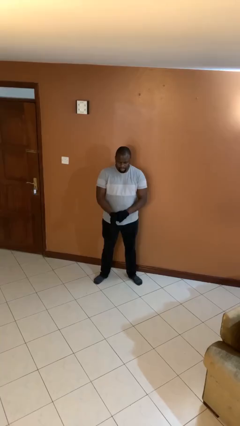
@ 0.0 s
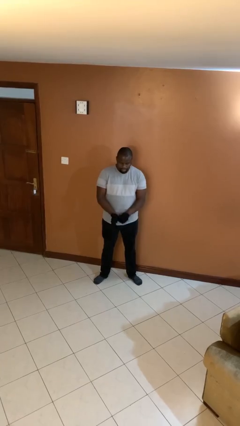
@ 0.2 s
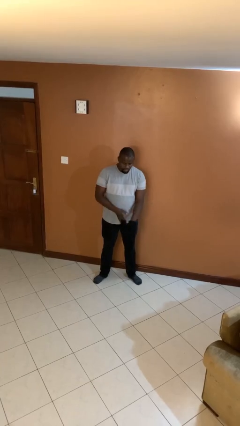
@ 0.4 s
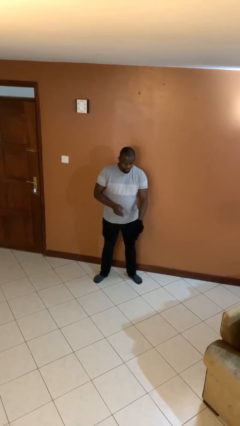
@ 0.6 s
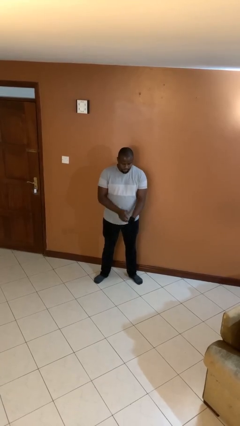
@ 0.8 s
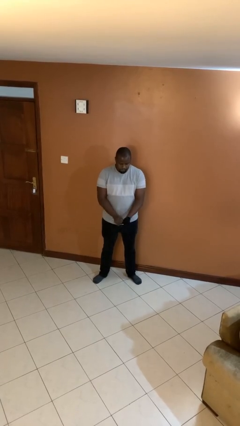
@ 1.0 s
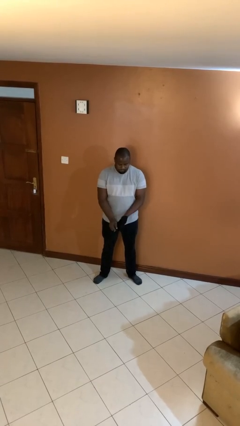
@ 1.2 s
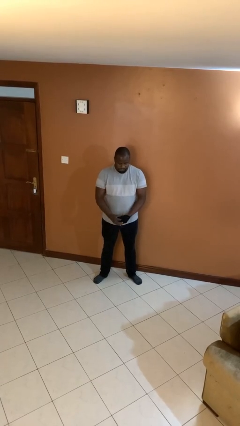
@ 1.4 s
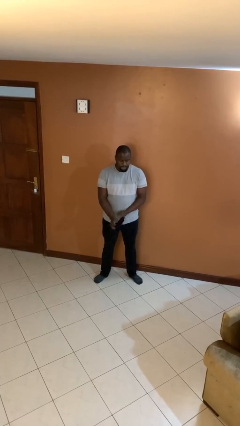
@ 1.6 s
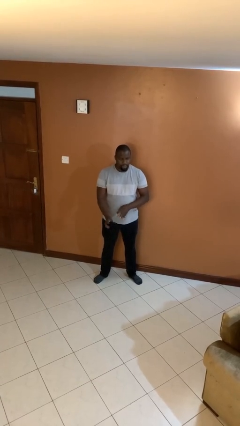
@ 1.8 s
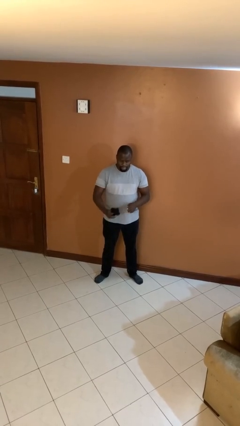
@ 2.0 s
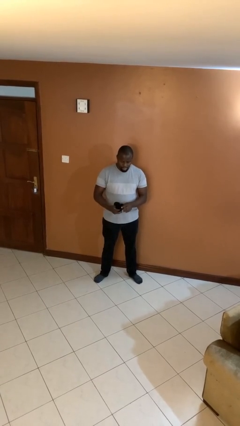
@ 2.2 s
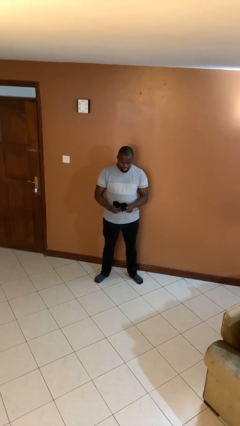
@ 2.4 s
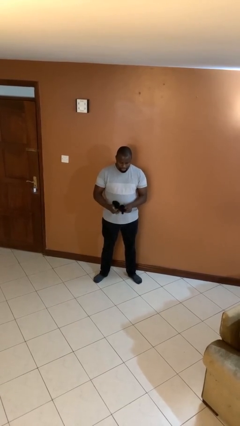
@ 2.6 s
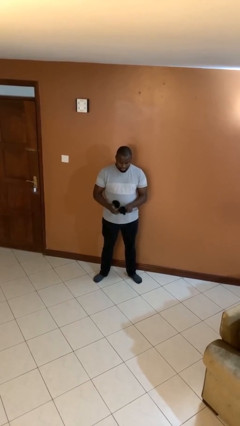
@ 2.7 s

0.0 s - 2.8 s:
person takes off gloves

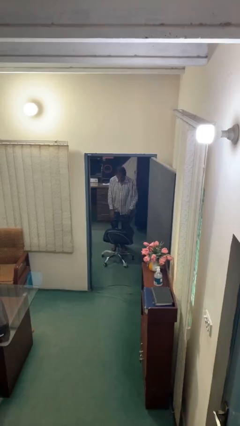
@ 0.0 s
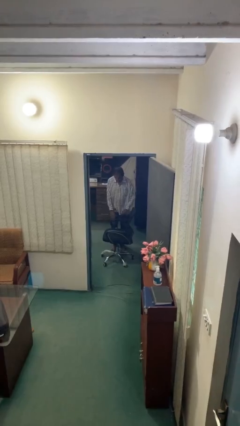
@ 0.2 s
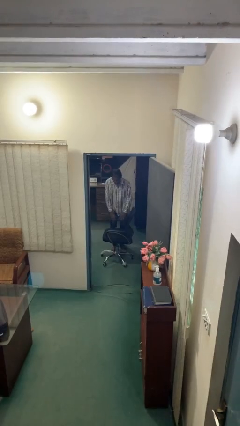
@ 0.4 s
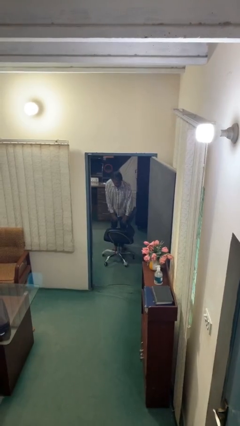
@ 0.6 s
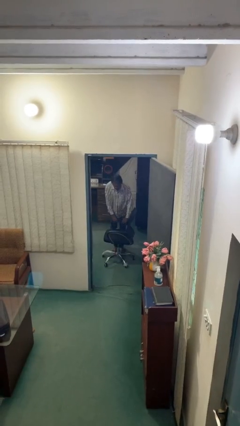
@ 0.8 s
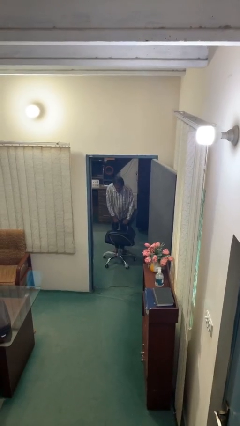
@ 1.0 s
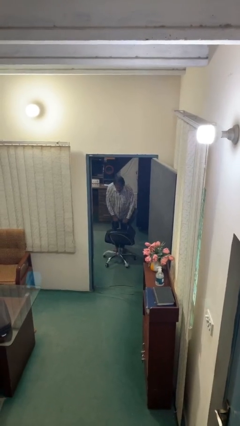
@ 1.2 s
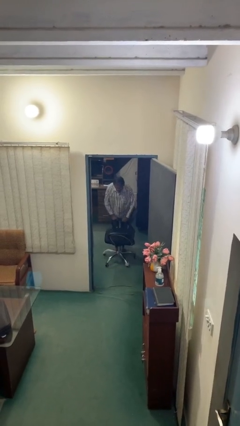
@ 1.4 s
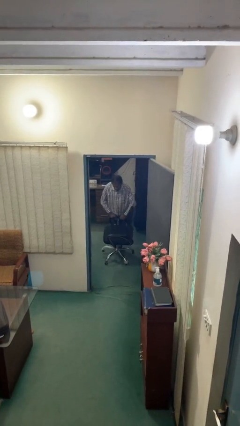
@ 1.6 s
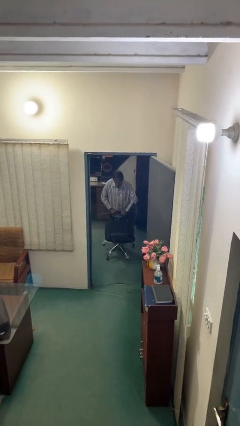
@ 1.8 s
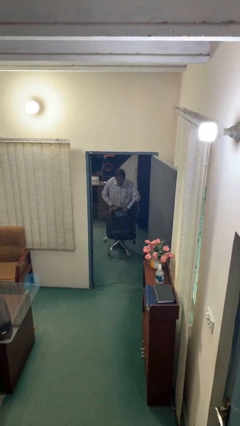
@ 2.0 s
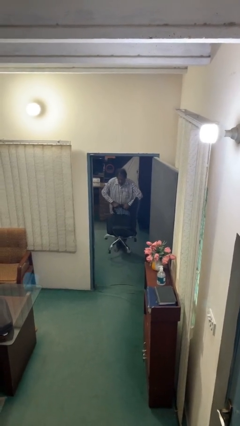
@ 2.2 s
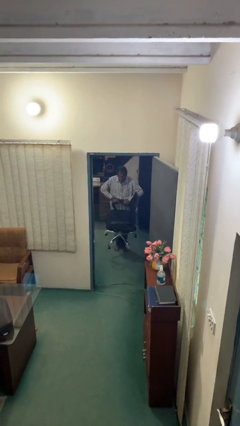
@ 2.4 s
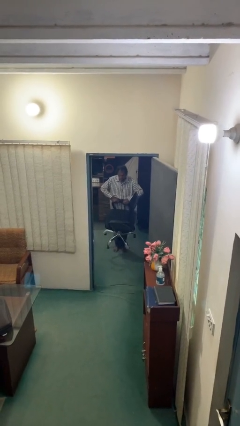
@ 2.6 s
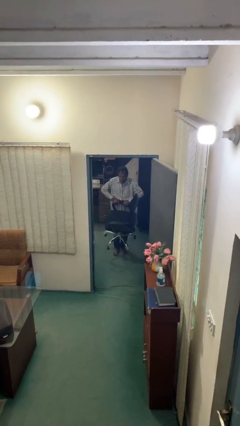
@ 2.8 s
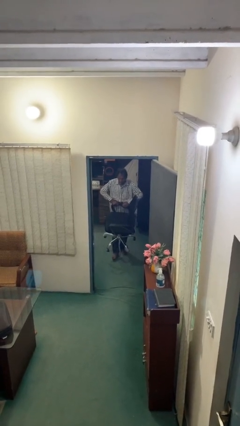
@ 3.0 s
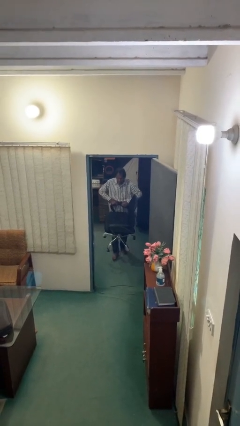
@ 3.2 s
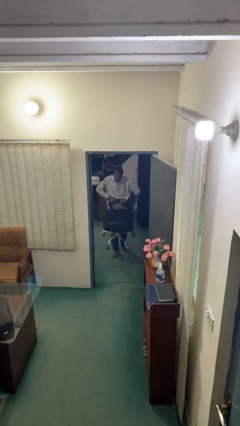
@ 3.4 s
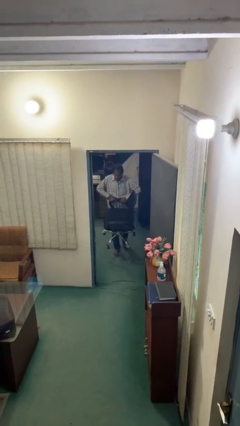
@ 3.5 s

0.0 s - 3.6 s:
person picks up object from floor

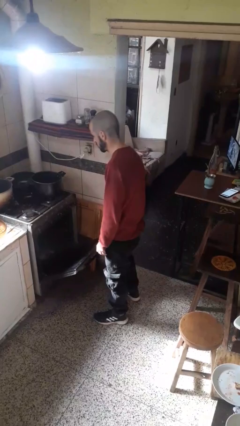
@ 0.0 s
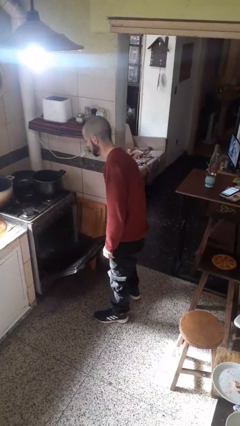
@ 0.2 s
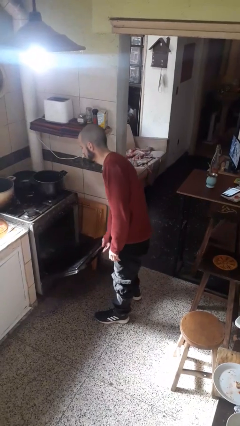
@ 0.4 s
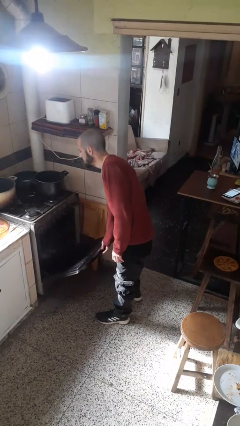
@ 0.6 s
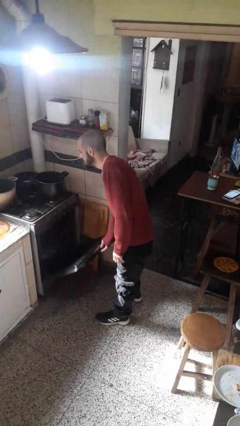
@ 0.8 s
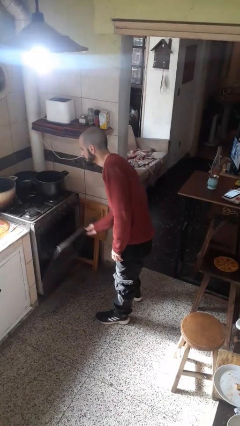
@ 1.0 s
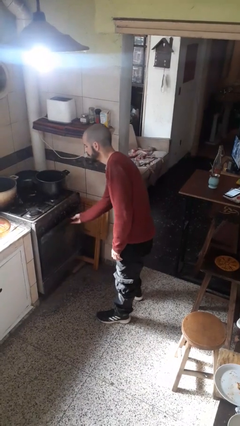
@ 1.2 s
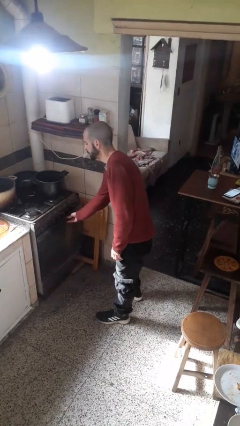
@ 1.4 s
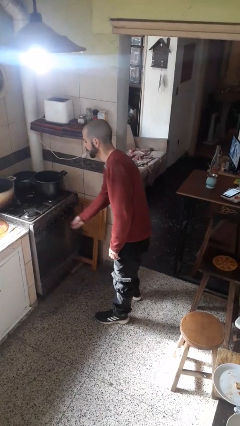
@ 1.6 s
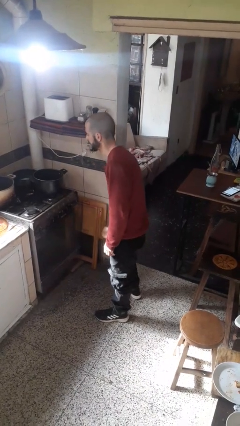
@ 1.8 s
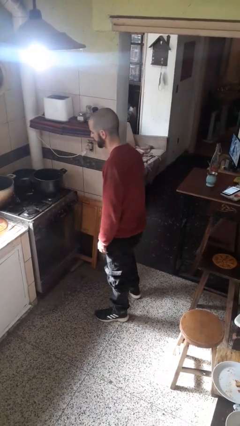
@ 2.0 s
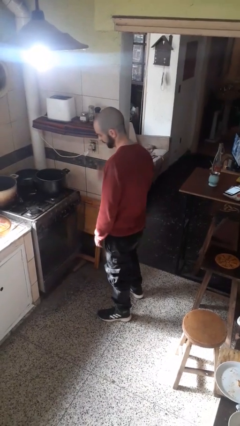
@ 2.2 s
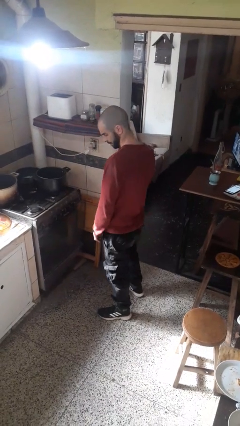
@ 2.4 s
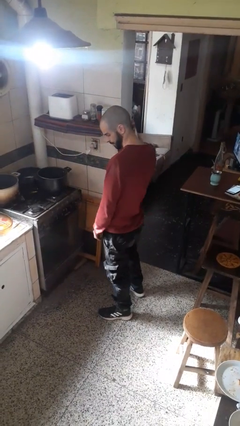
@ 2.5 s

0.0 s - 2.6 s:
person closes oven door

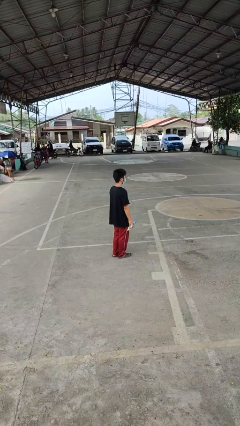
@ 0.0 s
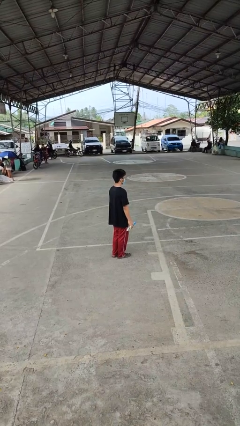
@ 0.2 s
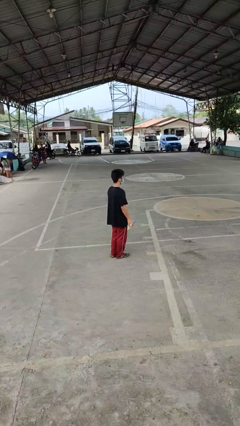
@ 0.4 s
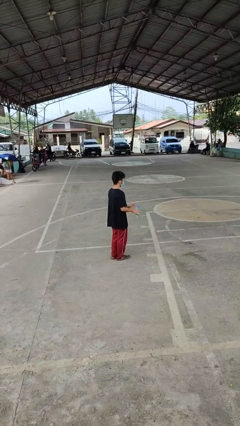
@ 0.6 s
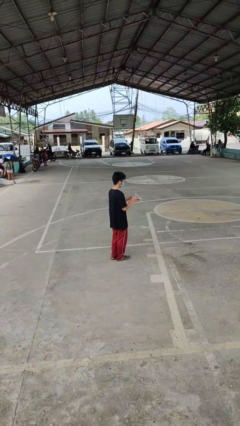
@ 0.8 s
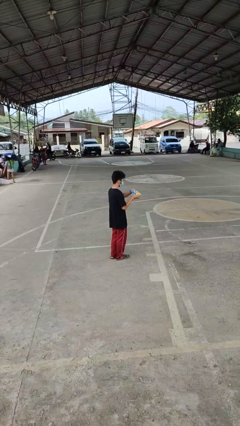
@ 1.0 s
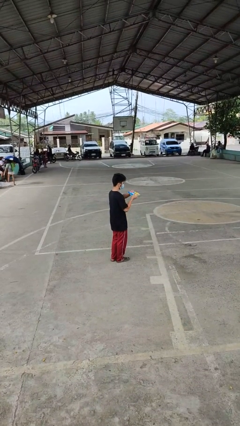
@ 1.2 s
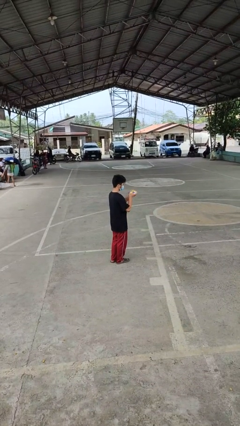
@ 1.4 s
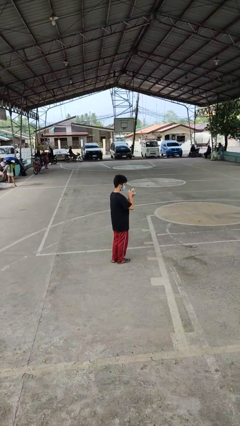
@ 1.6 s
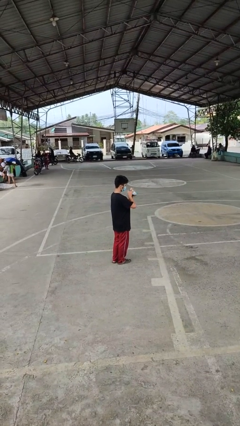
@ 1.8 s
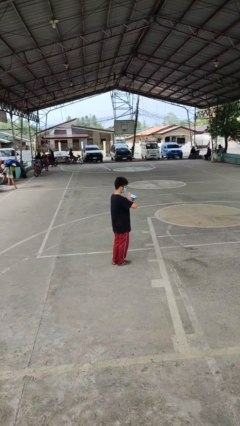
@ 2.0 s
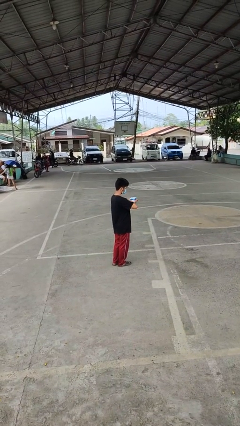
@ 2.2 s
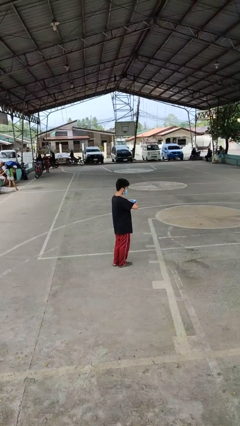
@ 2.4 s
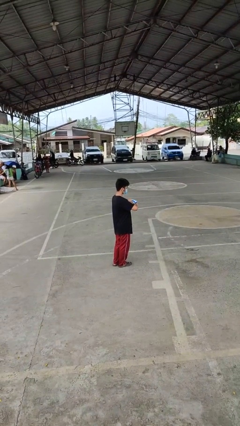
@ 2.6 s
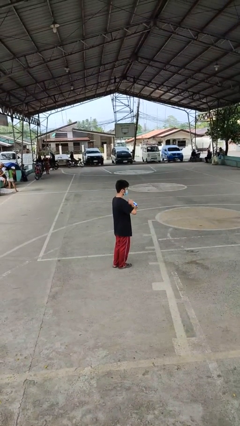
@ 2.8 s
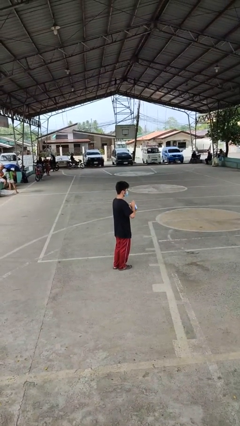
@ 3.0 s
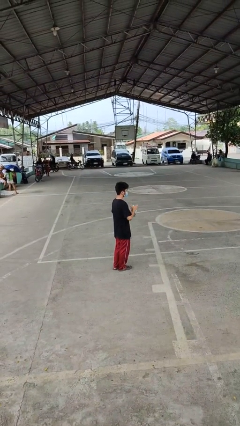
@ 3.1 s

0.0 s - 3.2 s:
person squeezes object

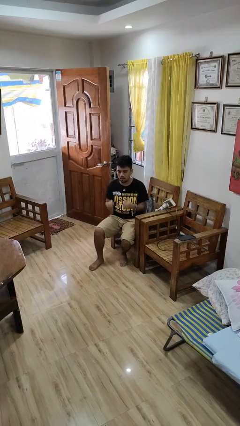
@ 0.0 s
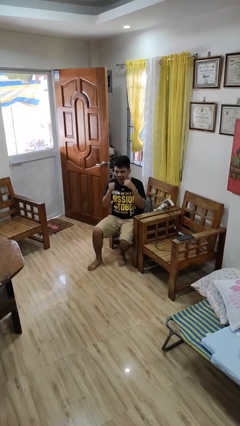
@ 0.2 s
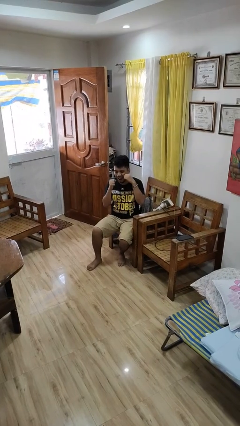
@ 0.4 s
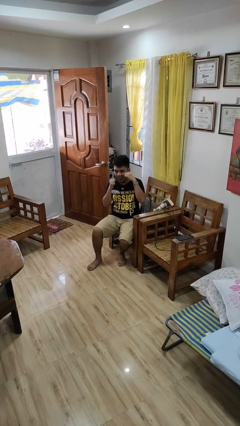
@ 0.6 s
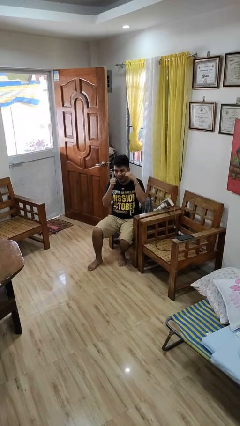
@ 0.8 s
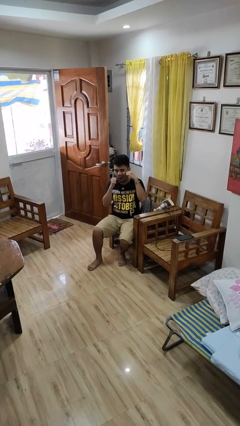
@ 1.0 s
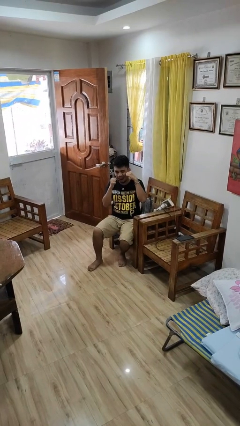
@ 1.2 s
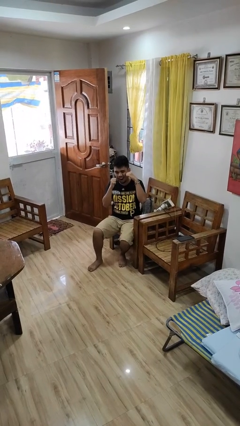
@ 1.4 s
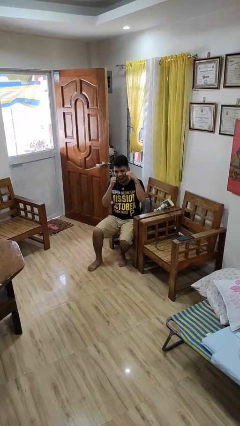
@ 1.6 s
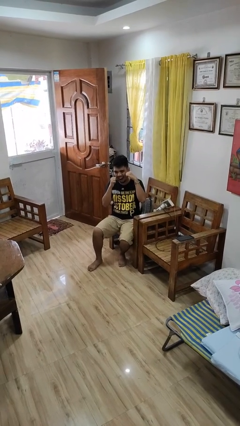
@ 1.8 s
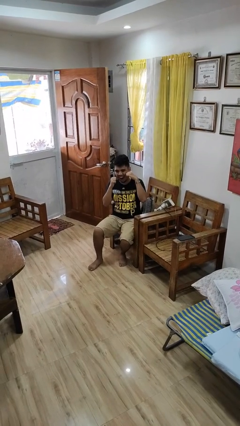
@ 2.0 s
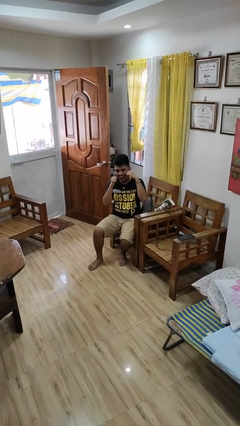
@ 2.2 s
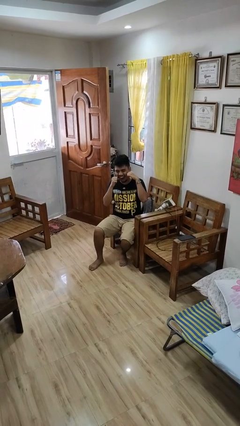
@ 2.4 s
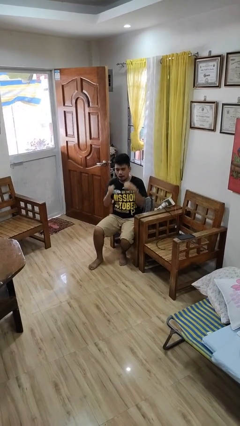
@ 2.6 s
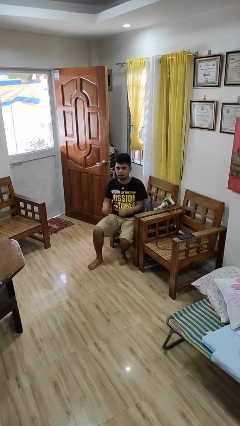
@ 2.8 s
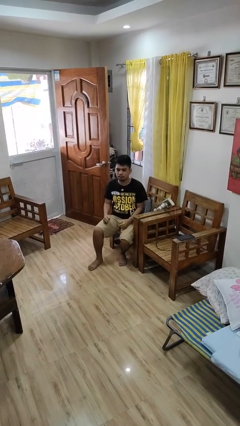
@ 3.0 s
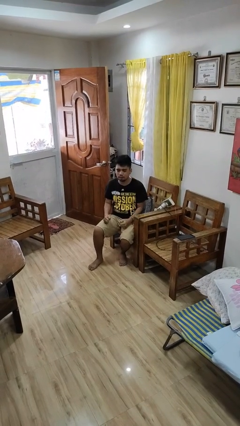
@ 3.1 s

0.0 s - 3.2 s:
person flosses

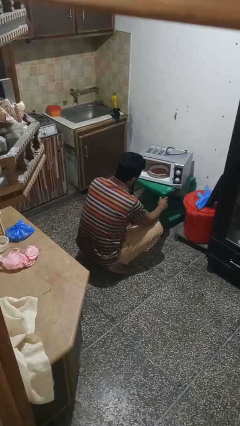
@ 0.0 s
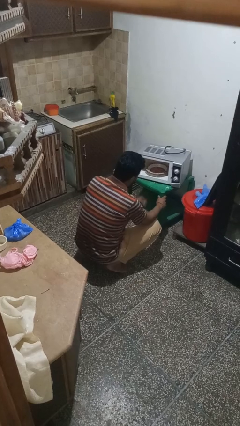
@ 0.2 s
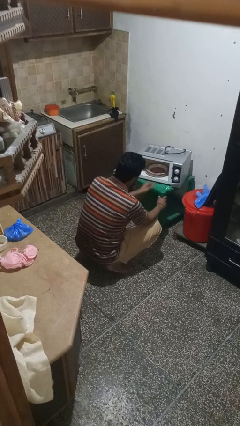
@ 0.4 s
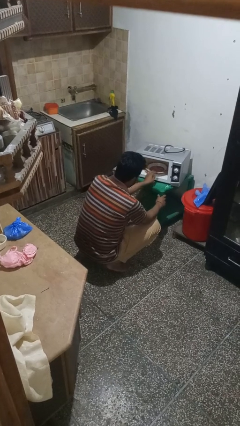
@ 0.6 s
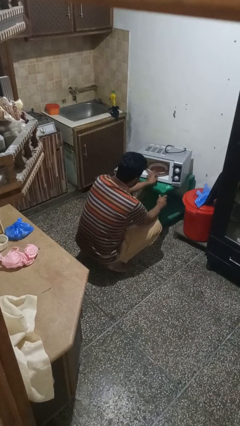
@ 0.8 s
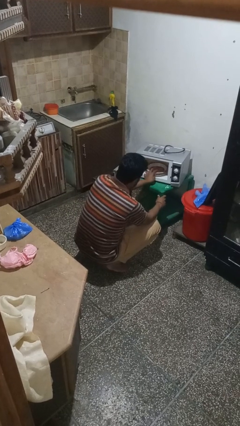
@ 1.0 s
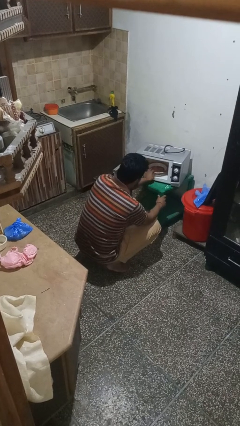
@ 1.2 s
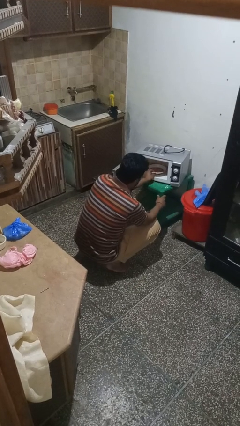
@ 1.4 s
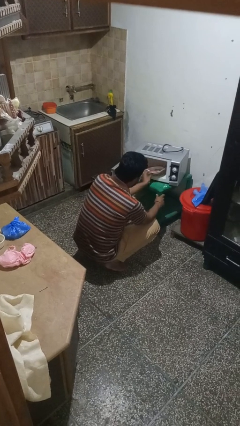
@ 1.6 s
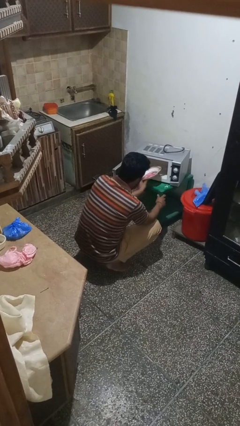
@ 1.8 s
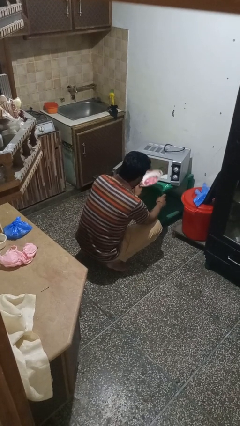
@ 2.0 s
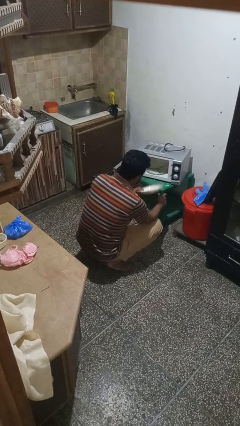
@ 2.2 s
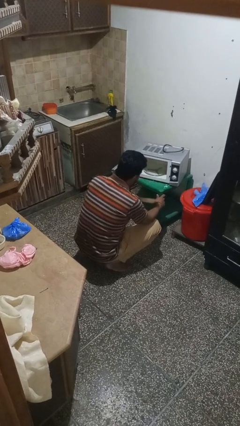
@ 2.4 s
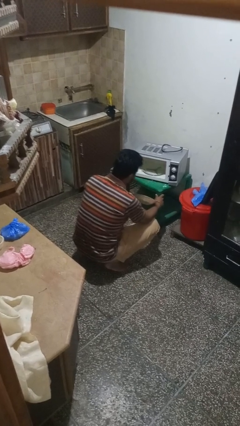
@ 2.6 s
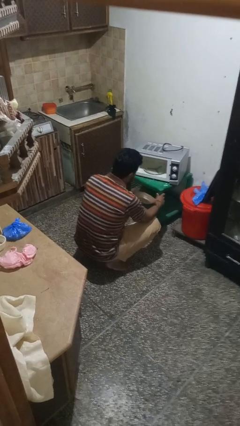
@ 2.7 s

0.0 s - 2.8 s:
person takes object from microwave
